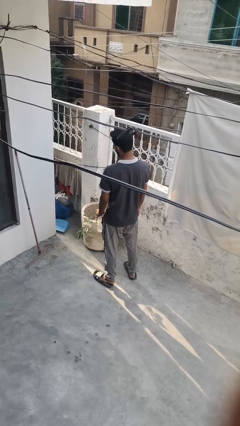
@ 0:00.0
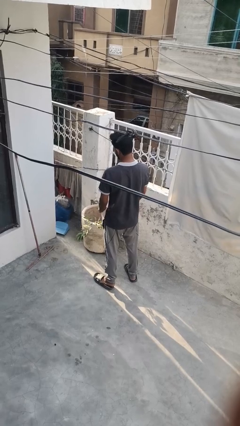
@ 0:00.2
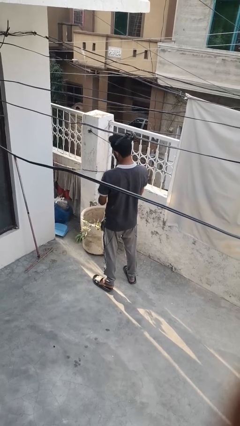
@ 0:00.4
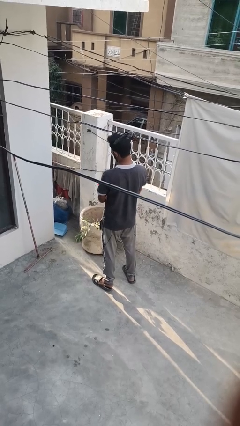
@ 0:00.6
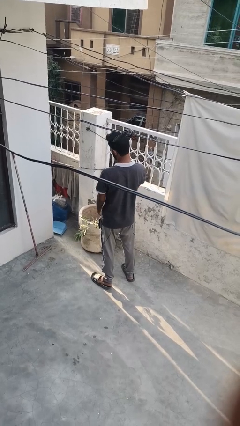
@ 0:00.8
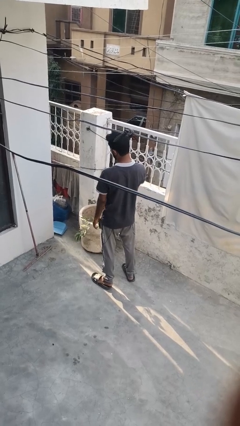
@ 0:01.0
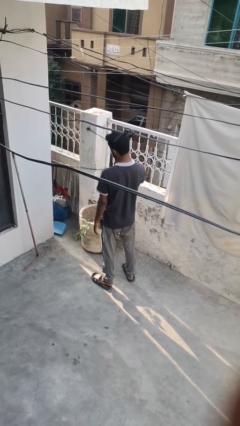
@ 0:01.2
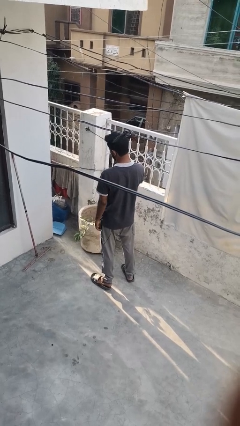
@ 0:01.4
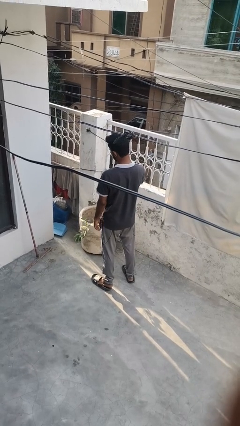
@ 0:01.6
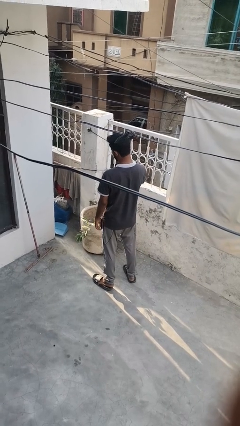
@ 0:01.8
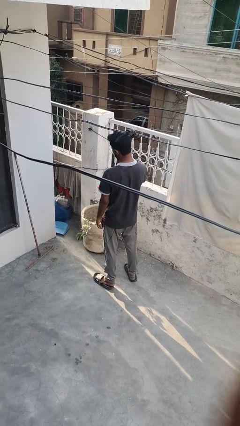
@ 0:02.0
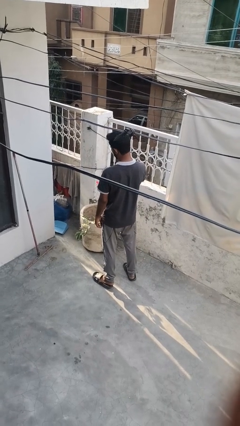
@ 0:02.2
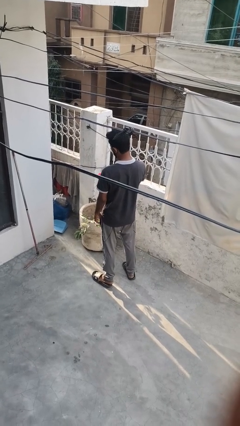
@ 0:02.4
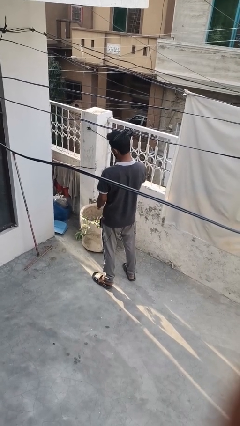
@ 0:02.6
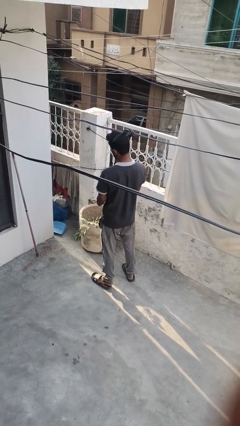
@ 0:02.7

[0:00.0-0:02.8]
person waters houseplant

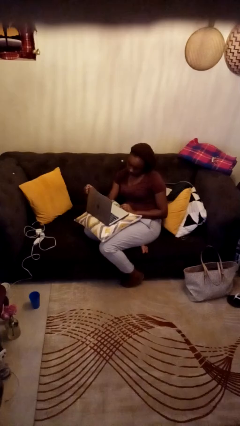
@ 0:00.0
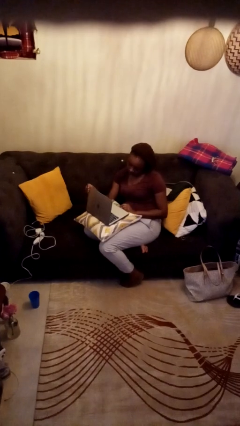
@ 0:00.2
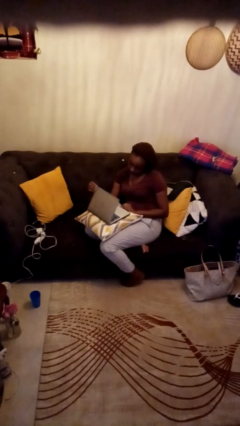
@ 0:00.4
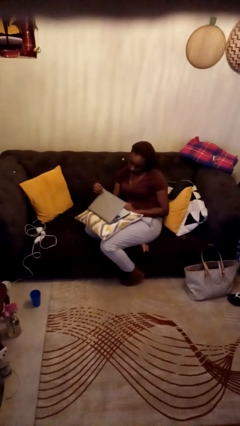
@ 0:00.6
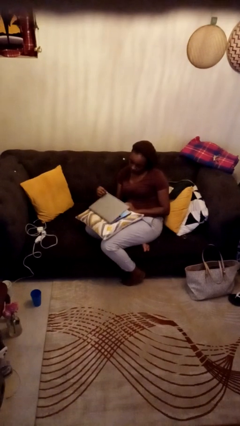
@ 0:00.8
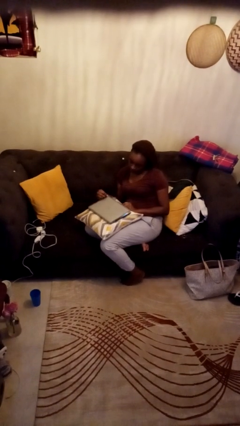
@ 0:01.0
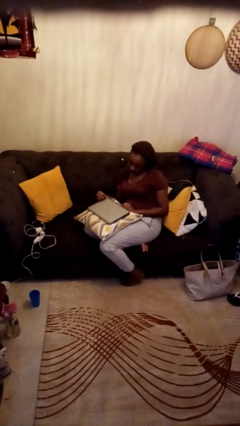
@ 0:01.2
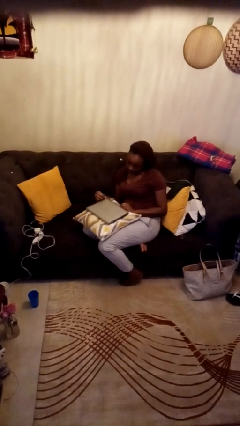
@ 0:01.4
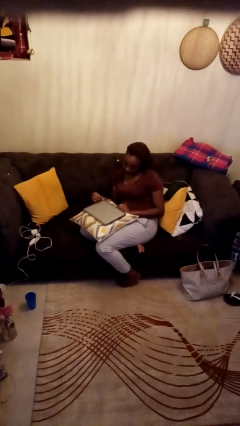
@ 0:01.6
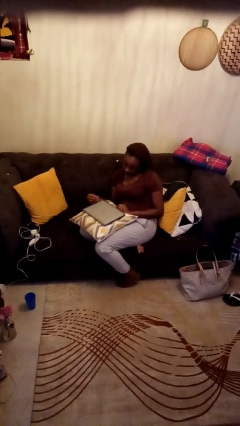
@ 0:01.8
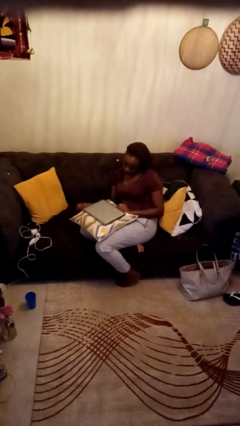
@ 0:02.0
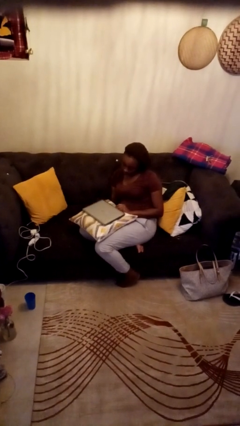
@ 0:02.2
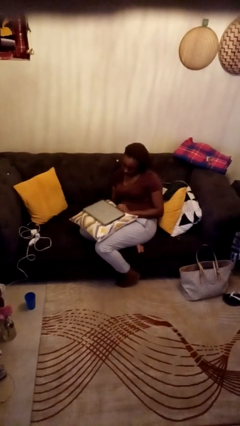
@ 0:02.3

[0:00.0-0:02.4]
person closes laptop

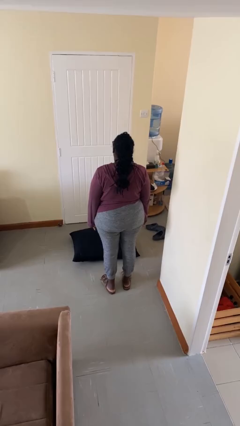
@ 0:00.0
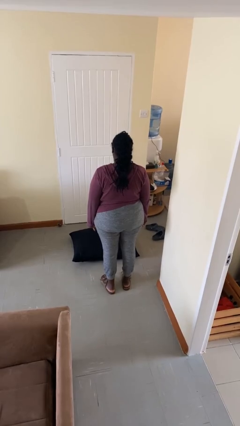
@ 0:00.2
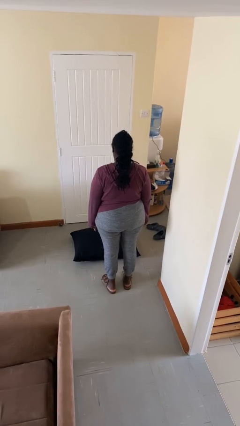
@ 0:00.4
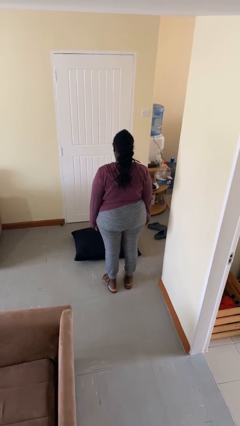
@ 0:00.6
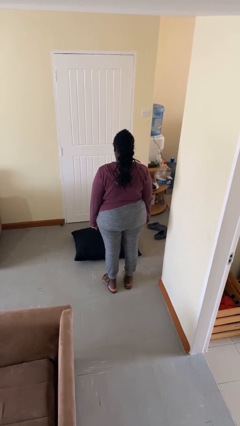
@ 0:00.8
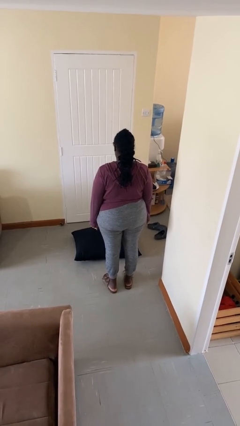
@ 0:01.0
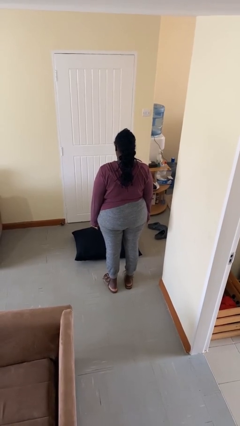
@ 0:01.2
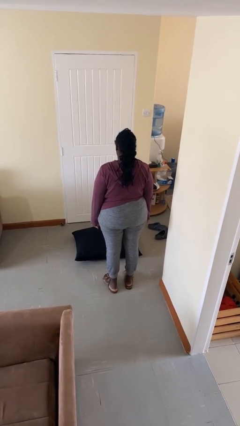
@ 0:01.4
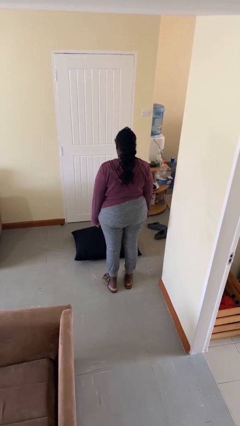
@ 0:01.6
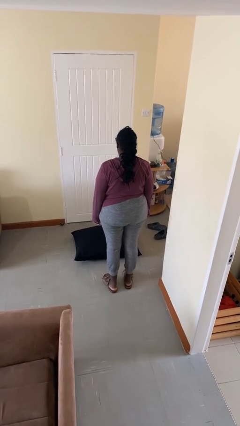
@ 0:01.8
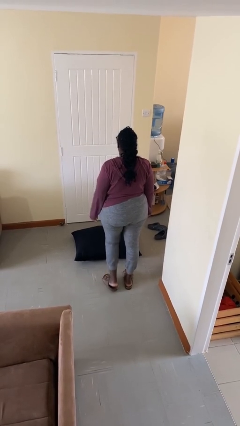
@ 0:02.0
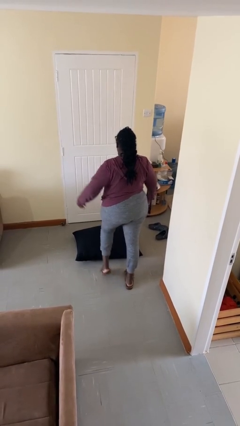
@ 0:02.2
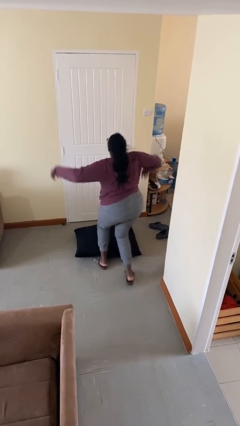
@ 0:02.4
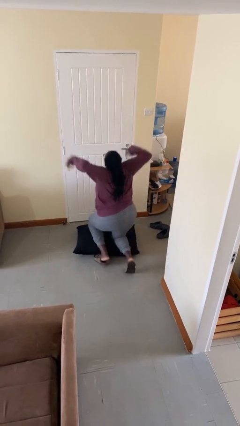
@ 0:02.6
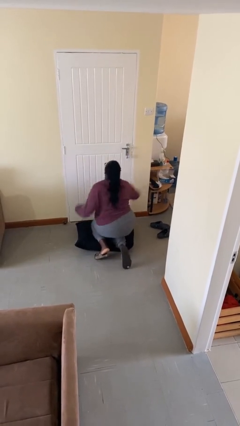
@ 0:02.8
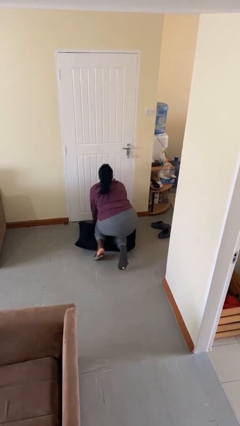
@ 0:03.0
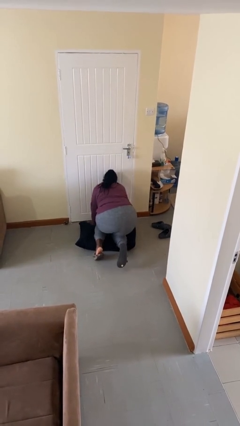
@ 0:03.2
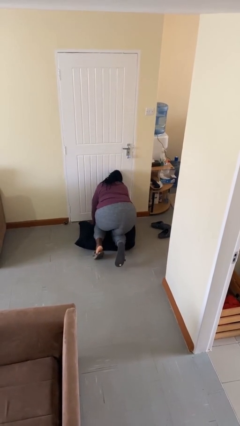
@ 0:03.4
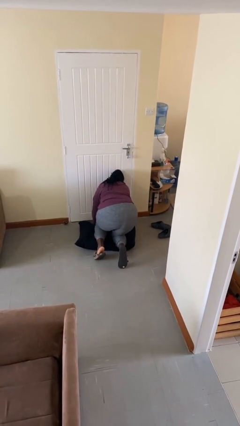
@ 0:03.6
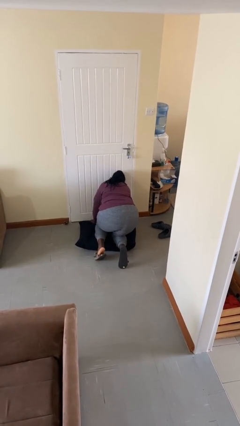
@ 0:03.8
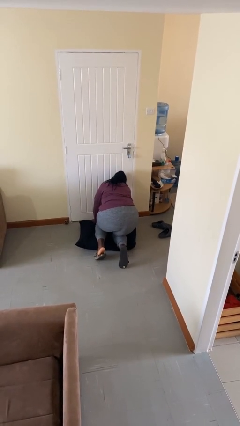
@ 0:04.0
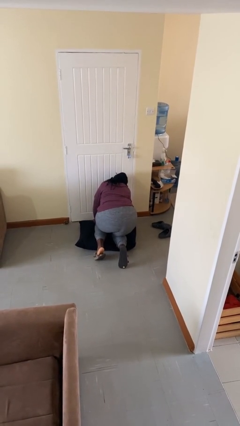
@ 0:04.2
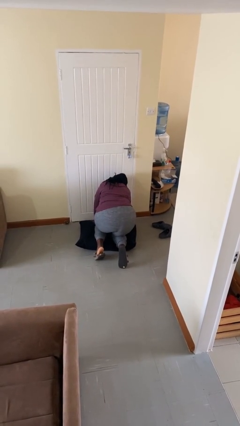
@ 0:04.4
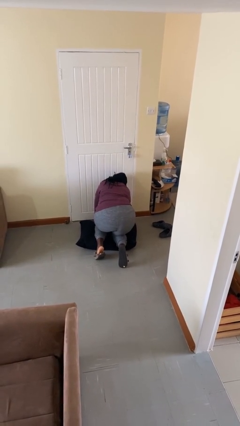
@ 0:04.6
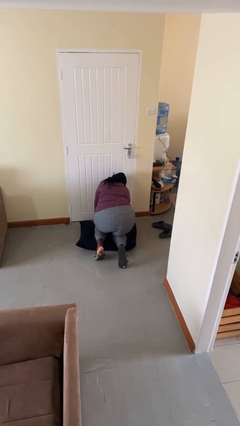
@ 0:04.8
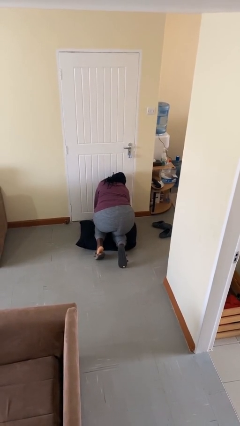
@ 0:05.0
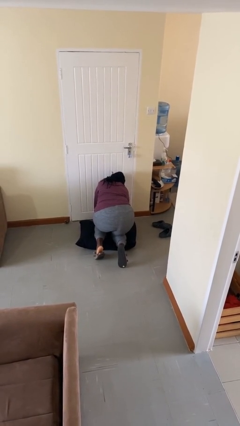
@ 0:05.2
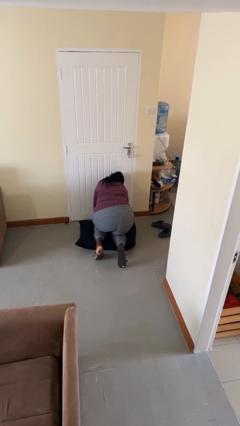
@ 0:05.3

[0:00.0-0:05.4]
person trips on object on floor

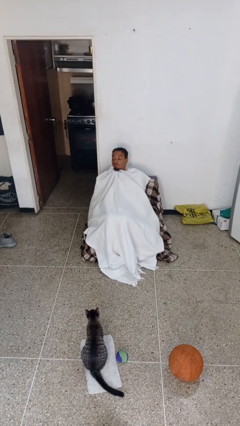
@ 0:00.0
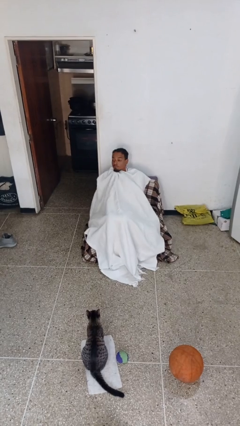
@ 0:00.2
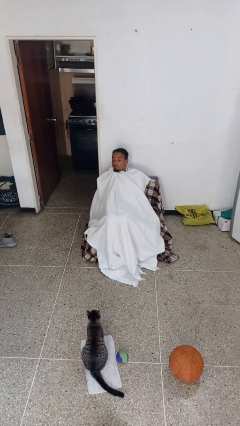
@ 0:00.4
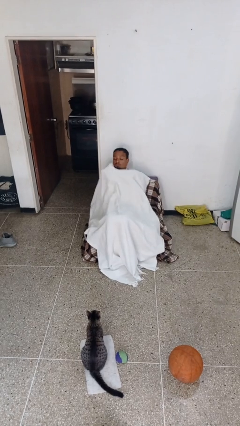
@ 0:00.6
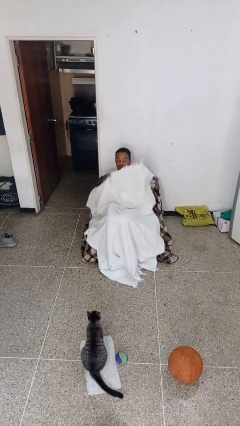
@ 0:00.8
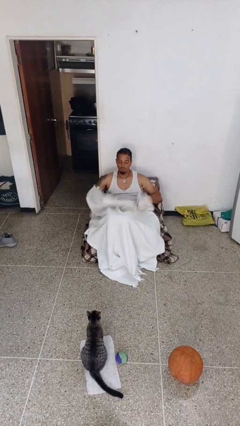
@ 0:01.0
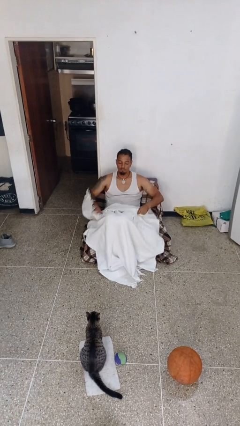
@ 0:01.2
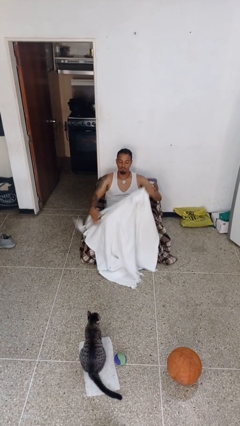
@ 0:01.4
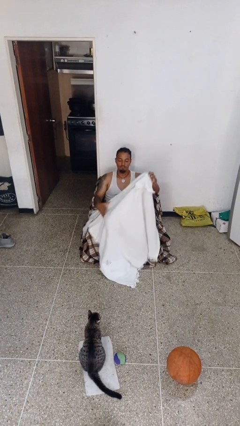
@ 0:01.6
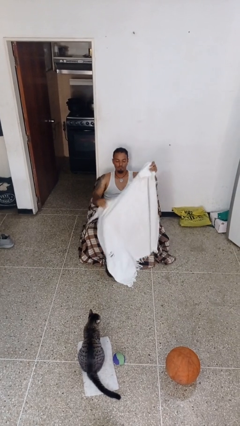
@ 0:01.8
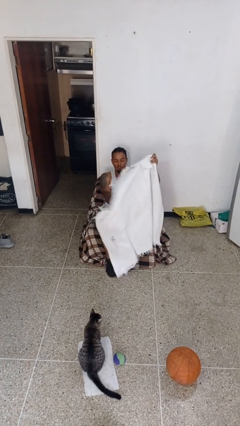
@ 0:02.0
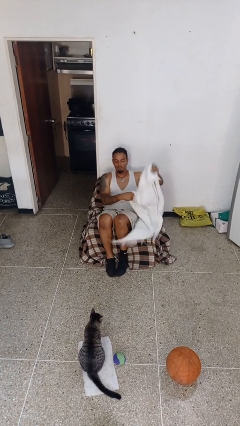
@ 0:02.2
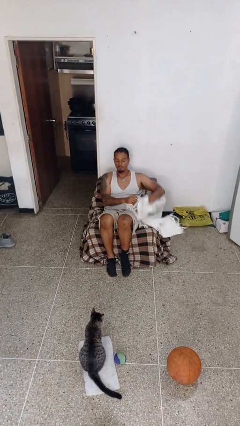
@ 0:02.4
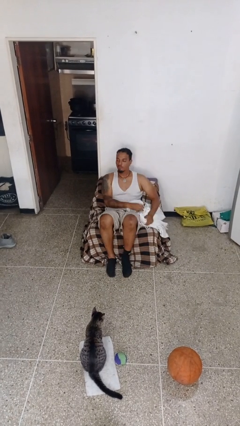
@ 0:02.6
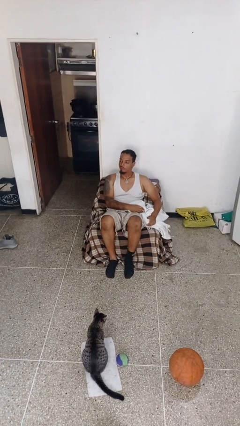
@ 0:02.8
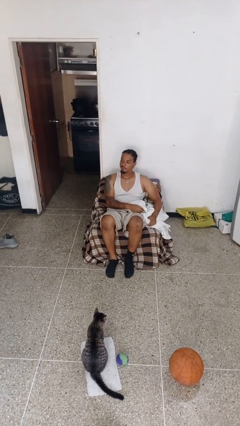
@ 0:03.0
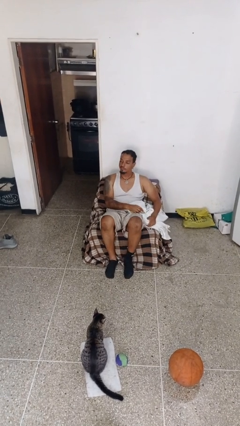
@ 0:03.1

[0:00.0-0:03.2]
person uncovers with blanket

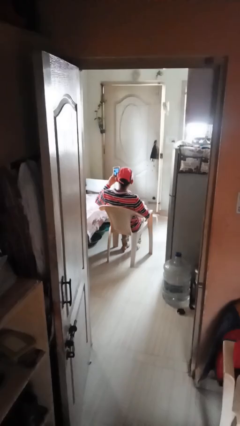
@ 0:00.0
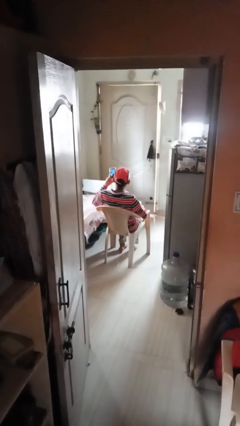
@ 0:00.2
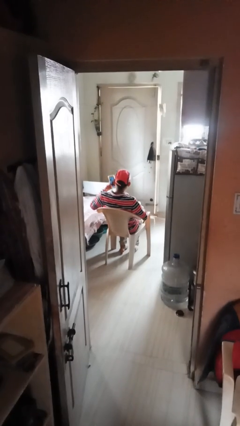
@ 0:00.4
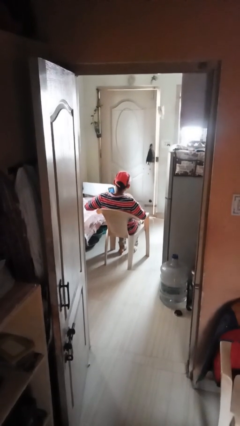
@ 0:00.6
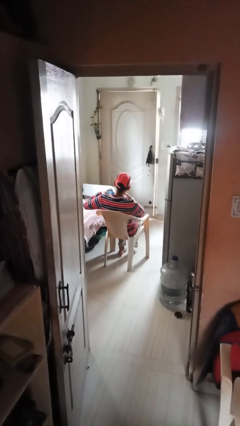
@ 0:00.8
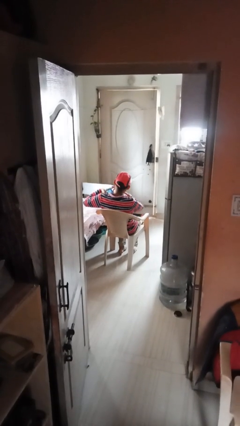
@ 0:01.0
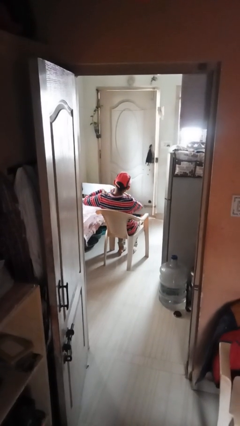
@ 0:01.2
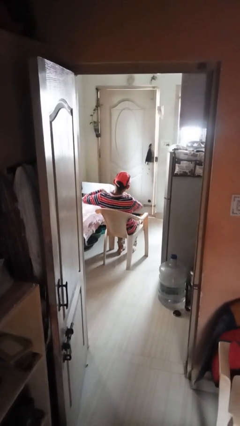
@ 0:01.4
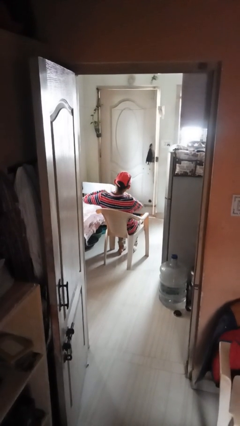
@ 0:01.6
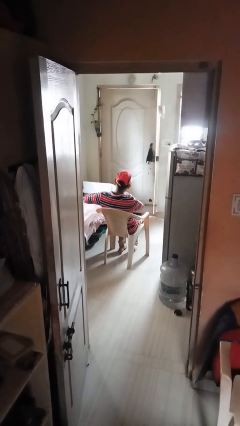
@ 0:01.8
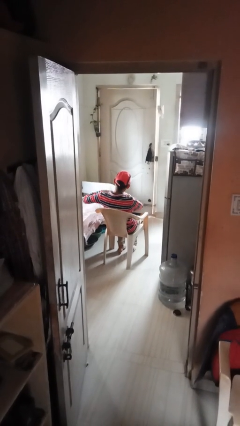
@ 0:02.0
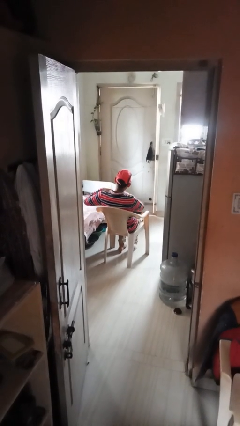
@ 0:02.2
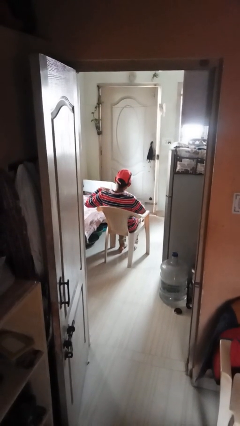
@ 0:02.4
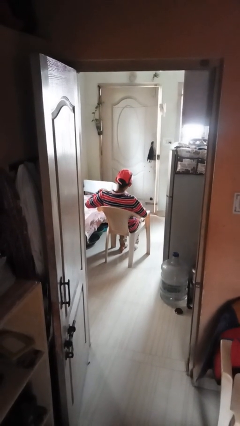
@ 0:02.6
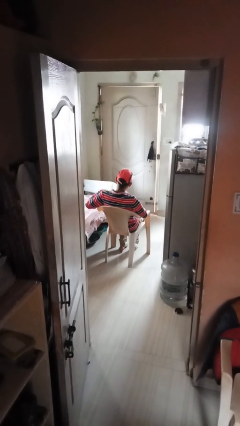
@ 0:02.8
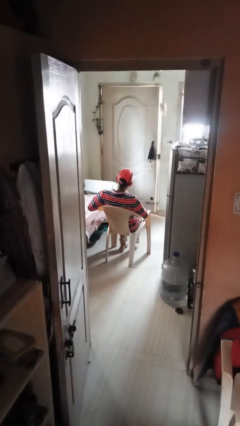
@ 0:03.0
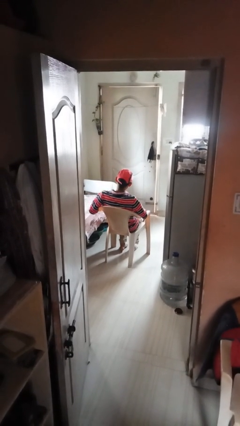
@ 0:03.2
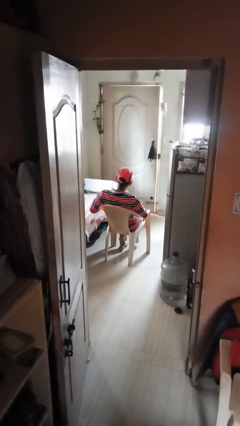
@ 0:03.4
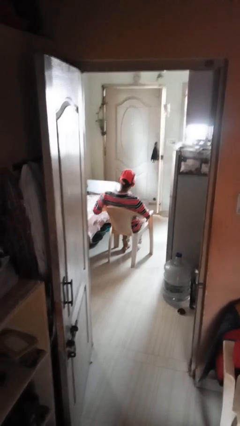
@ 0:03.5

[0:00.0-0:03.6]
person puts phone into pocket
